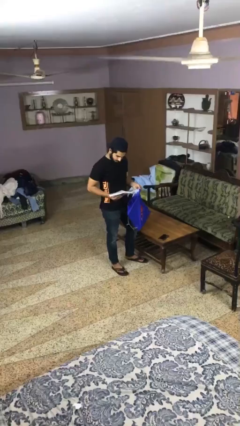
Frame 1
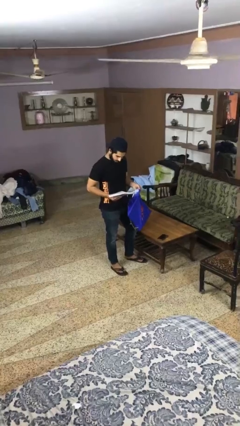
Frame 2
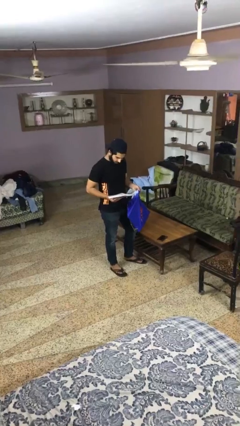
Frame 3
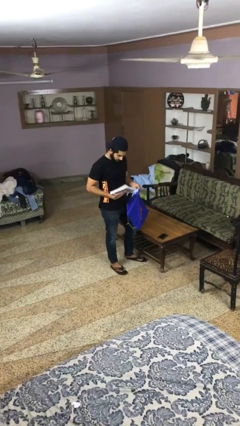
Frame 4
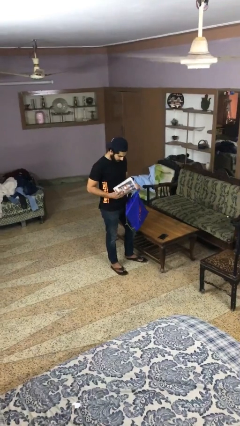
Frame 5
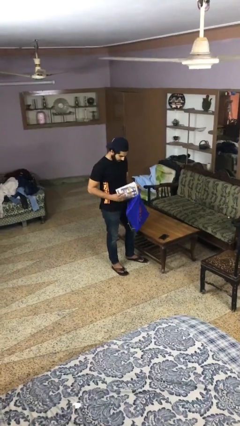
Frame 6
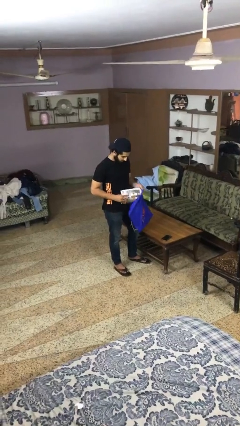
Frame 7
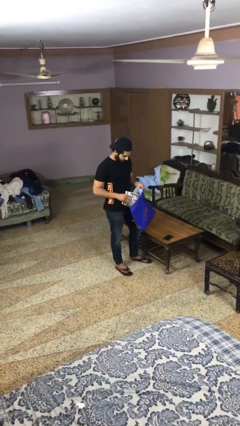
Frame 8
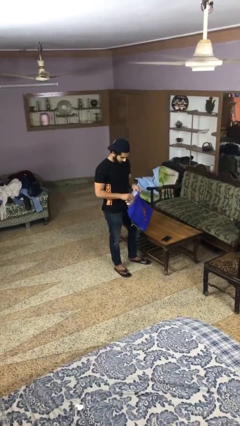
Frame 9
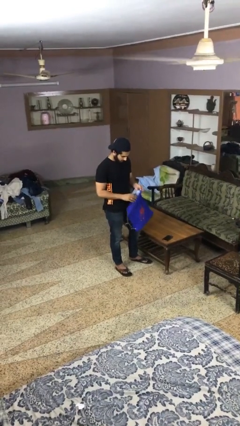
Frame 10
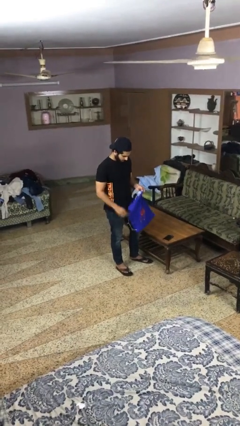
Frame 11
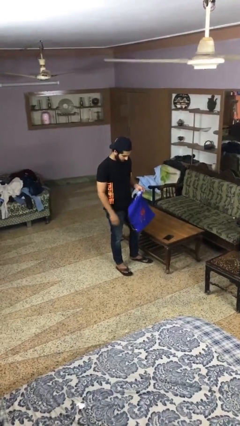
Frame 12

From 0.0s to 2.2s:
person puts object into bag

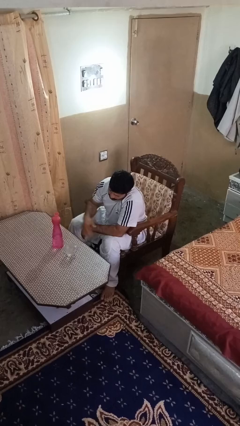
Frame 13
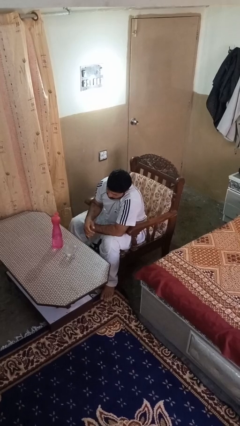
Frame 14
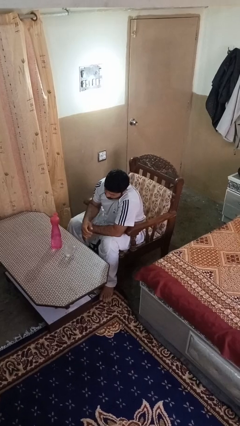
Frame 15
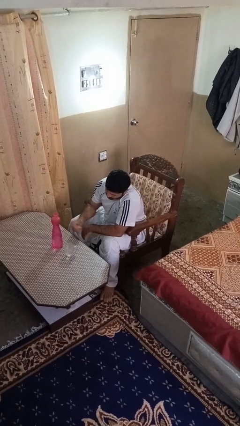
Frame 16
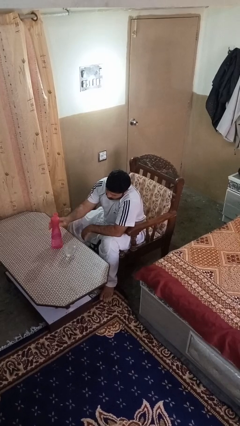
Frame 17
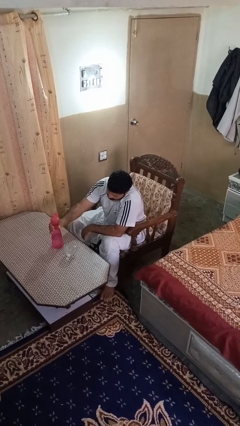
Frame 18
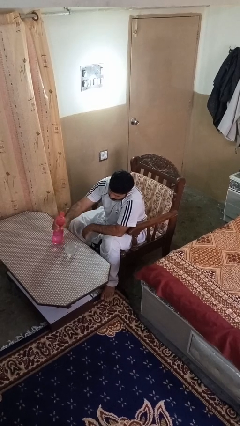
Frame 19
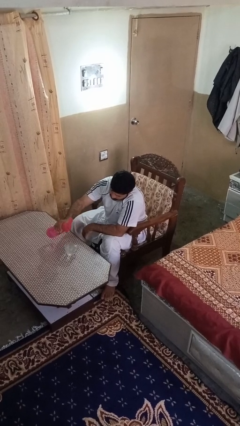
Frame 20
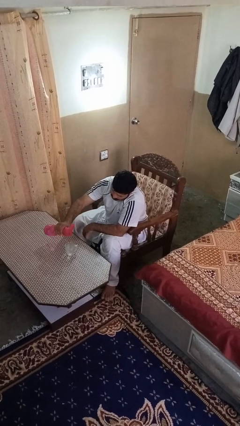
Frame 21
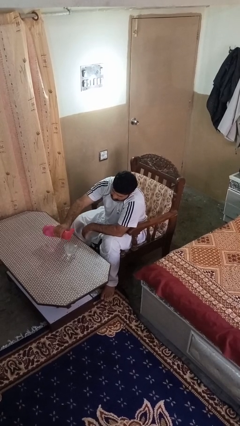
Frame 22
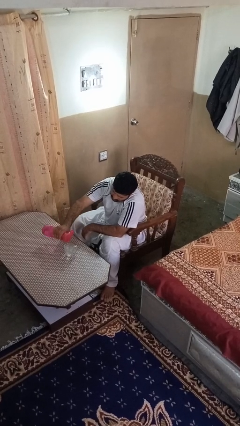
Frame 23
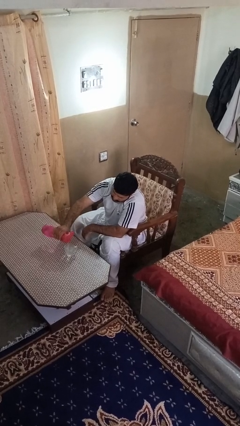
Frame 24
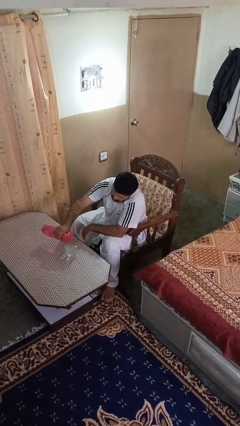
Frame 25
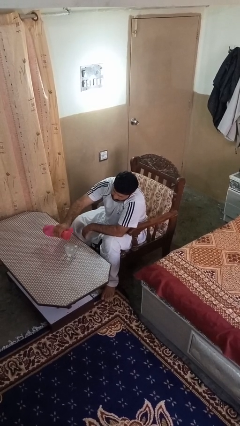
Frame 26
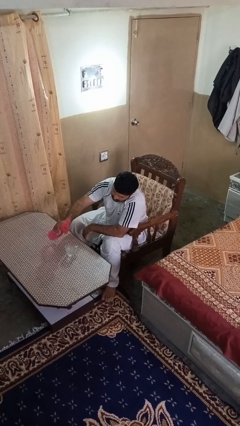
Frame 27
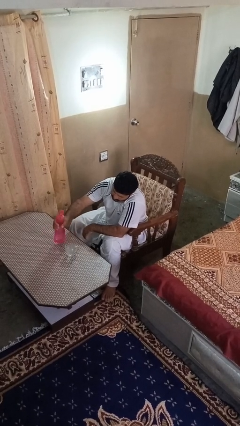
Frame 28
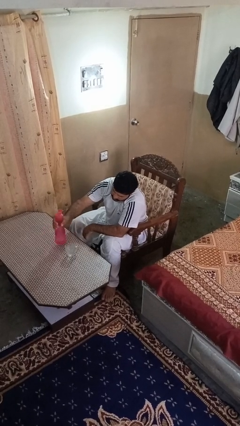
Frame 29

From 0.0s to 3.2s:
person pours liquid into cup

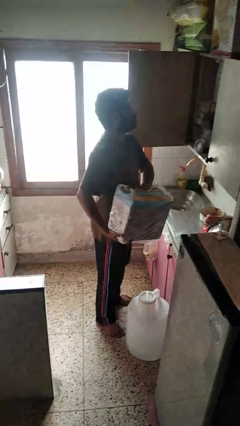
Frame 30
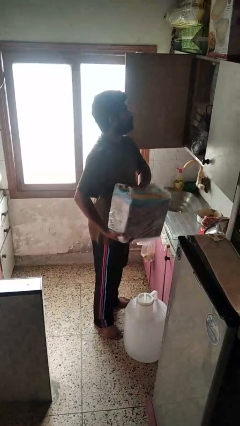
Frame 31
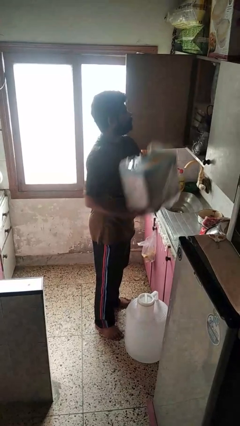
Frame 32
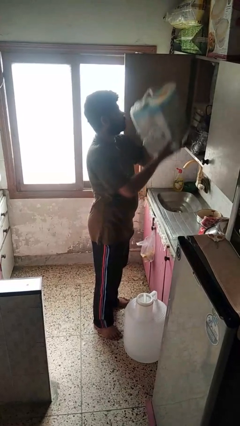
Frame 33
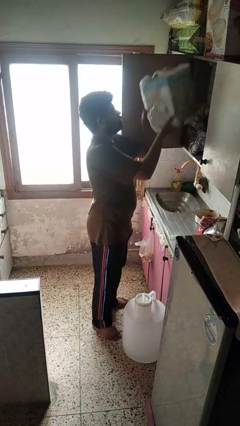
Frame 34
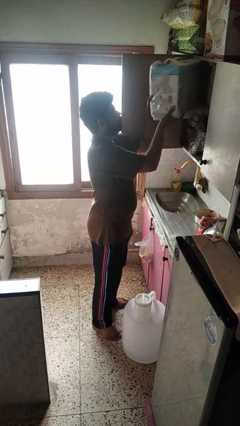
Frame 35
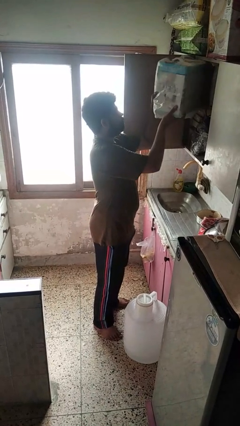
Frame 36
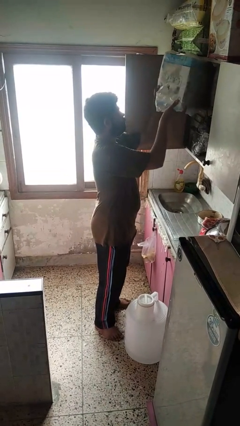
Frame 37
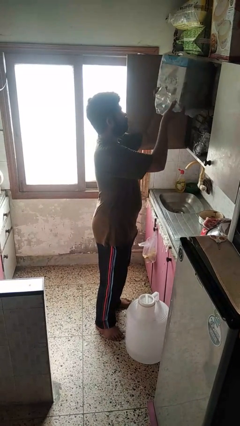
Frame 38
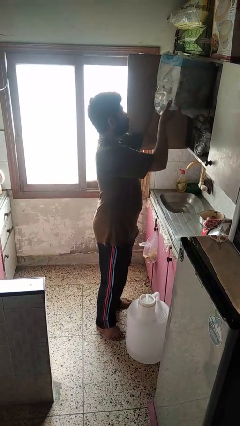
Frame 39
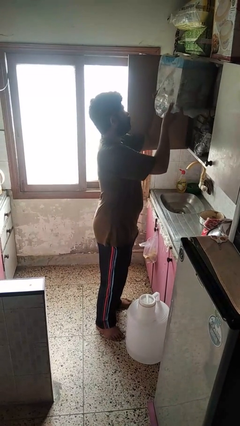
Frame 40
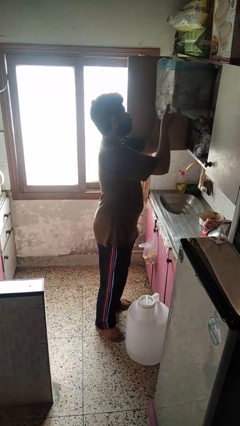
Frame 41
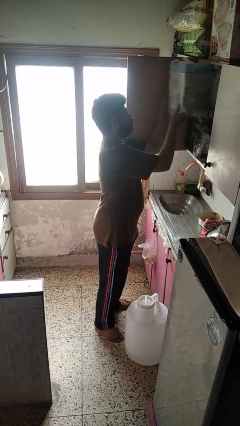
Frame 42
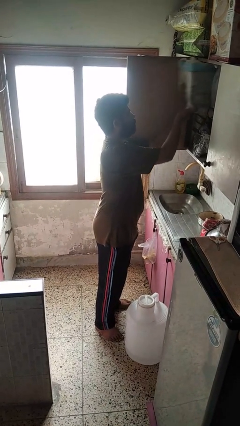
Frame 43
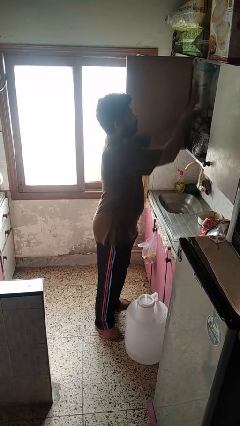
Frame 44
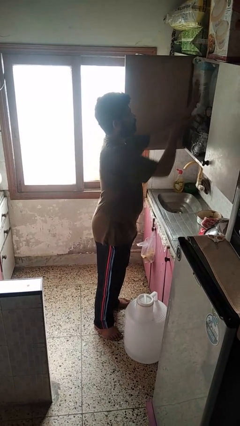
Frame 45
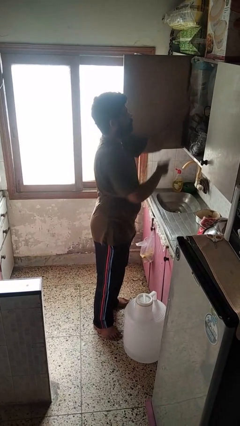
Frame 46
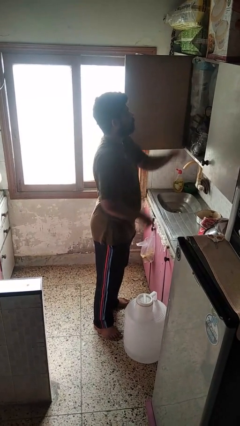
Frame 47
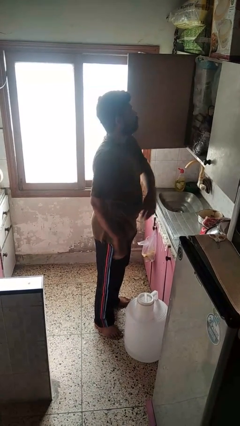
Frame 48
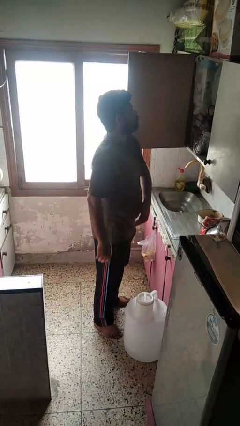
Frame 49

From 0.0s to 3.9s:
person puts down object into cabinet

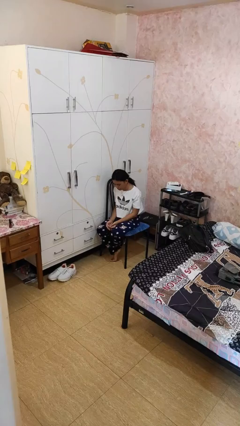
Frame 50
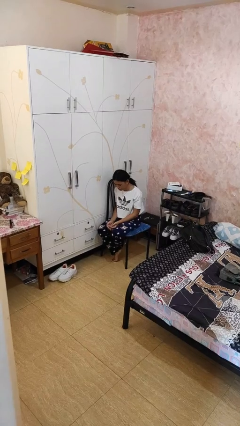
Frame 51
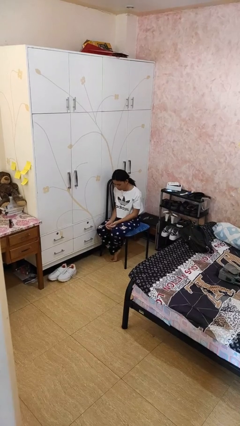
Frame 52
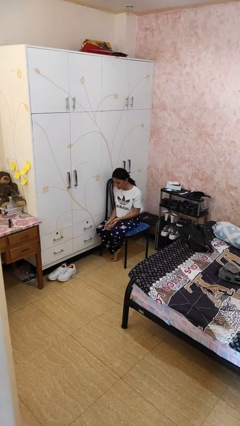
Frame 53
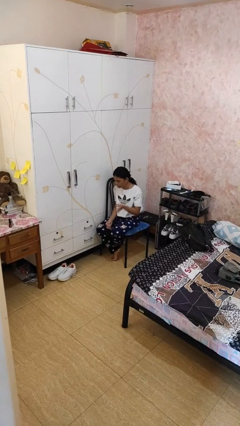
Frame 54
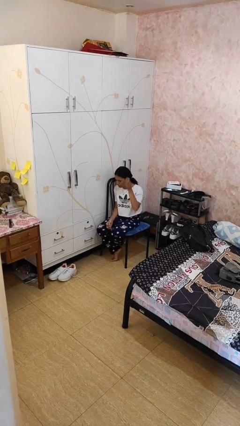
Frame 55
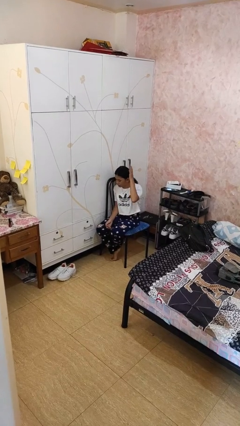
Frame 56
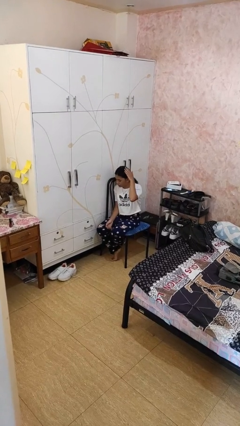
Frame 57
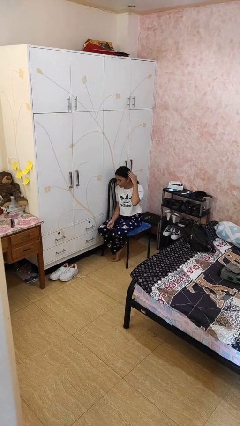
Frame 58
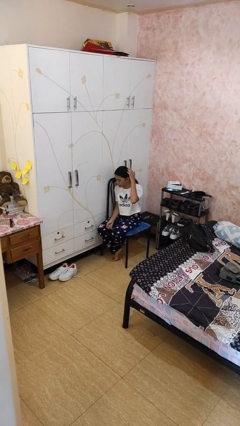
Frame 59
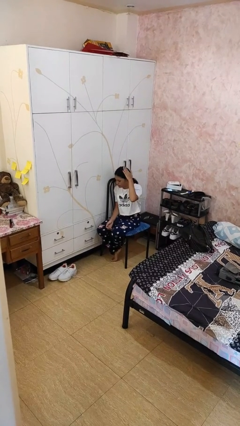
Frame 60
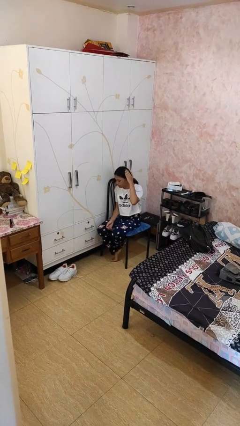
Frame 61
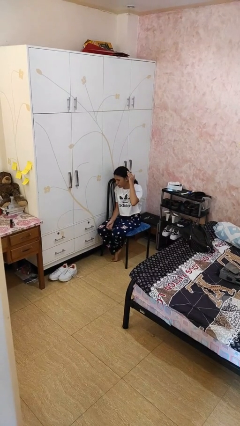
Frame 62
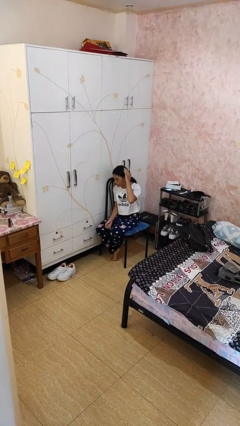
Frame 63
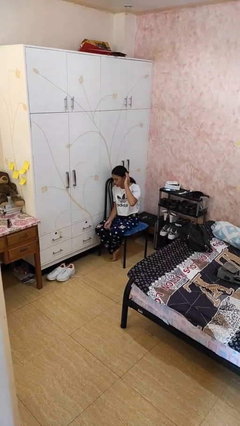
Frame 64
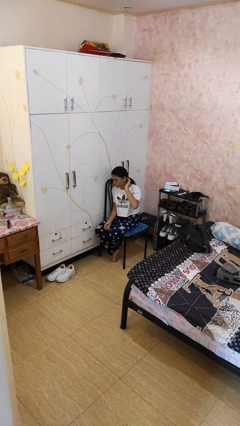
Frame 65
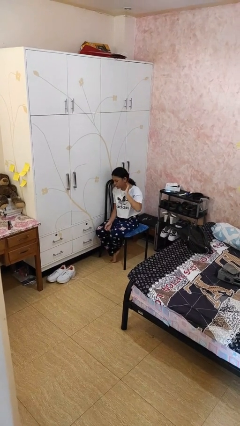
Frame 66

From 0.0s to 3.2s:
person pats head

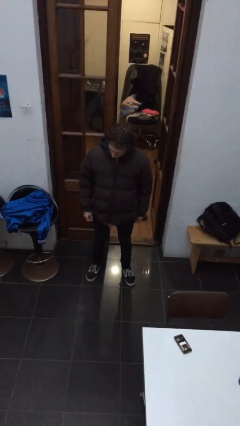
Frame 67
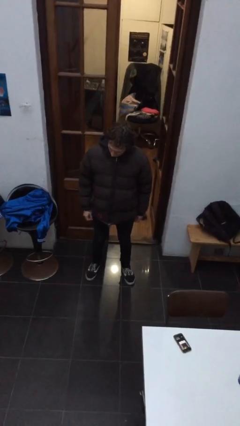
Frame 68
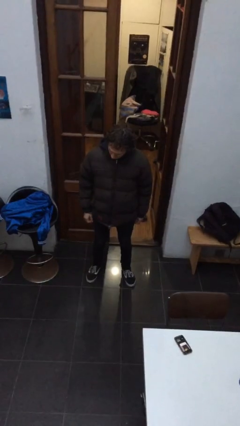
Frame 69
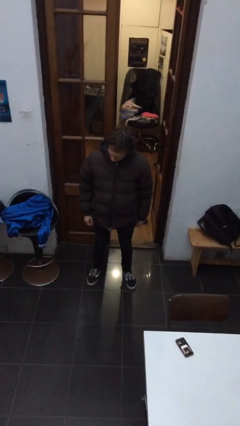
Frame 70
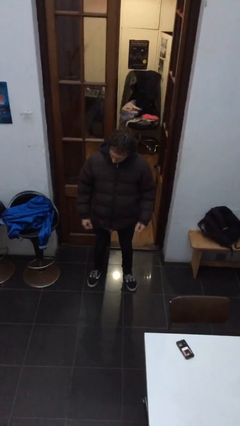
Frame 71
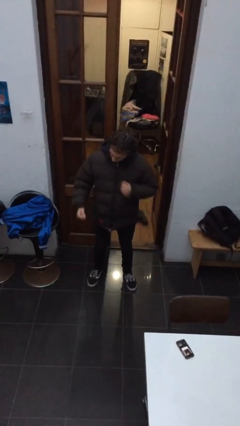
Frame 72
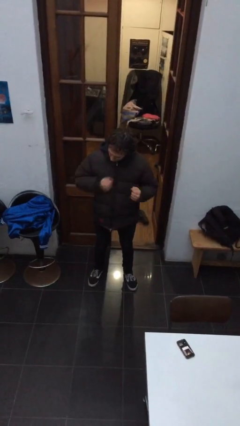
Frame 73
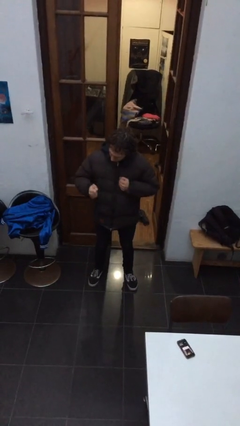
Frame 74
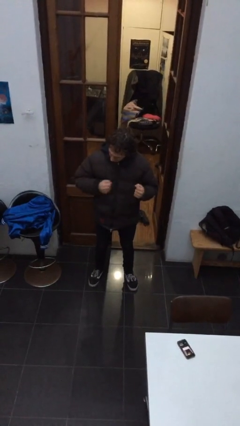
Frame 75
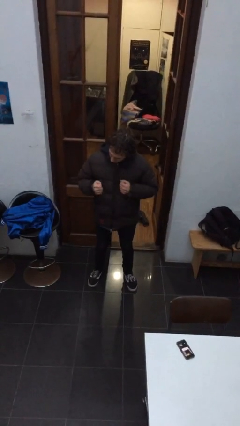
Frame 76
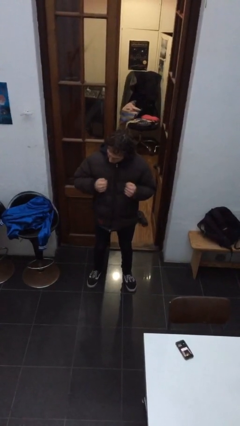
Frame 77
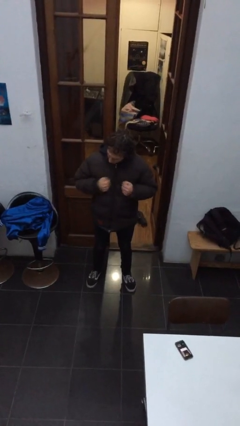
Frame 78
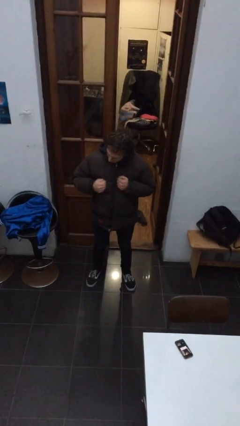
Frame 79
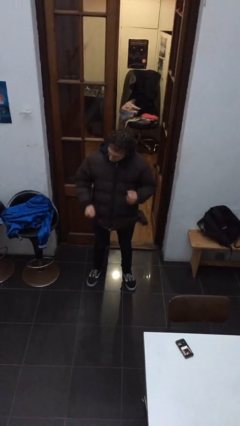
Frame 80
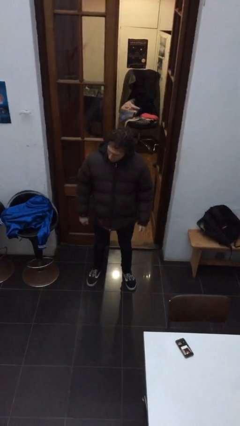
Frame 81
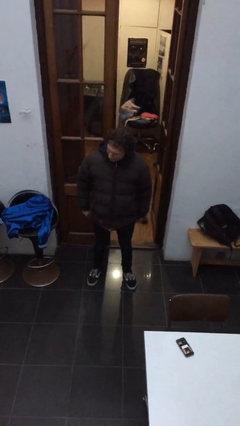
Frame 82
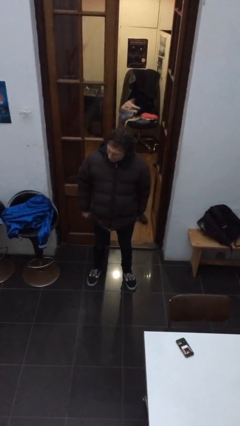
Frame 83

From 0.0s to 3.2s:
person drums on chest

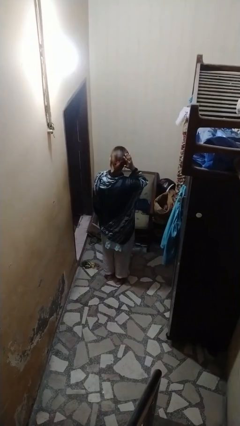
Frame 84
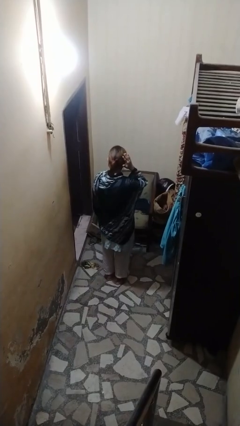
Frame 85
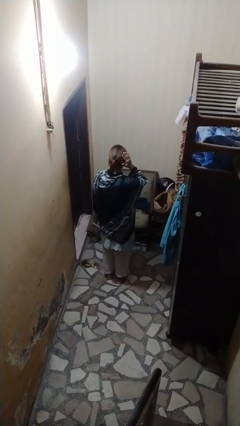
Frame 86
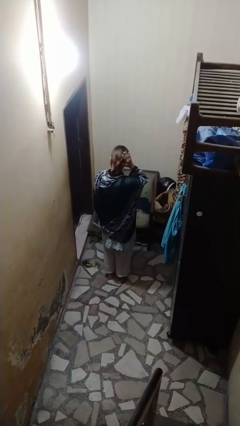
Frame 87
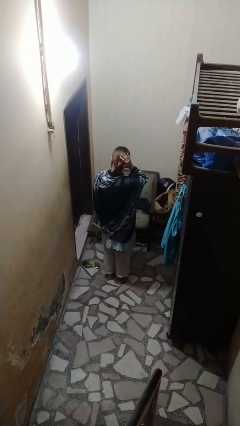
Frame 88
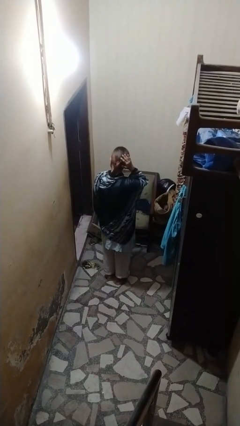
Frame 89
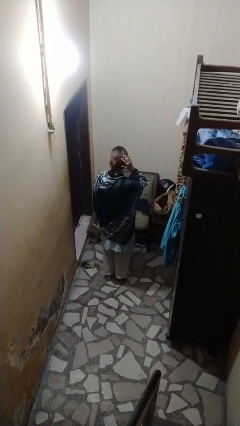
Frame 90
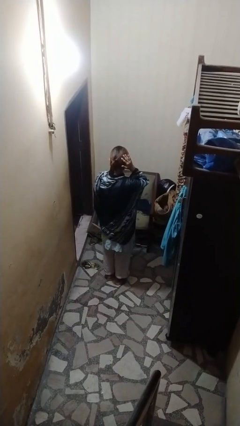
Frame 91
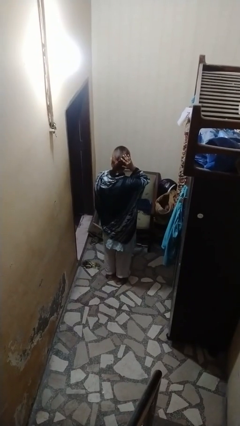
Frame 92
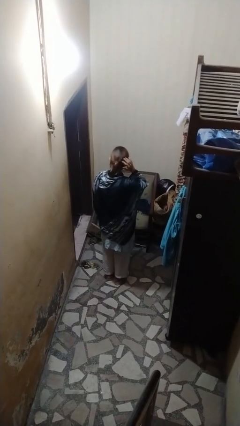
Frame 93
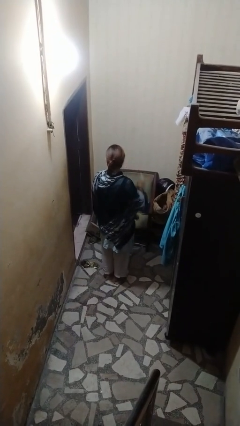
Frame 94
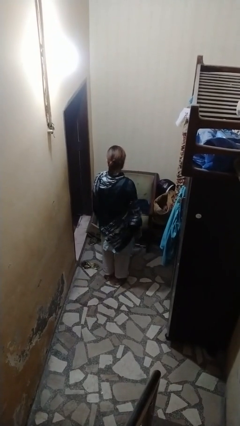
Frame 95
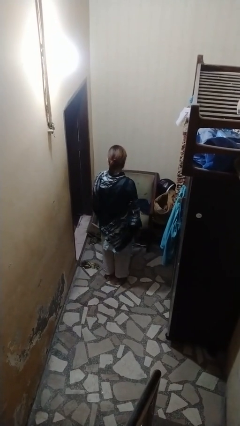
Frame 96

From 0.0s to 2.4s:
person strokes hair
